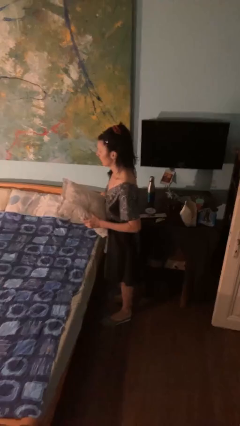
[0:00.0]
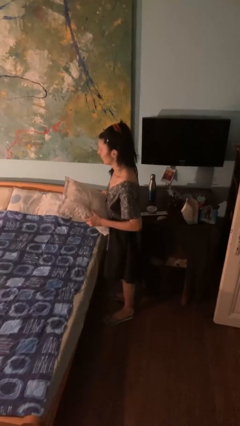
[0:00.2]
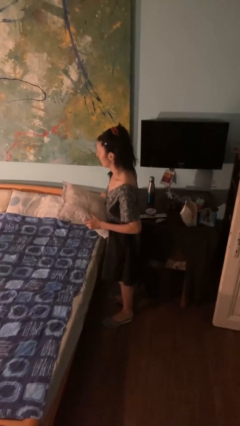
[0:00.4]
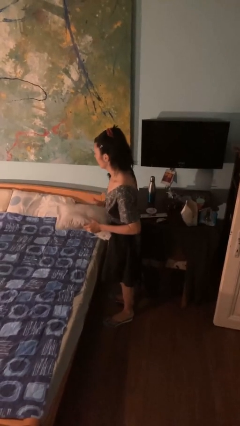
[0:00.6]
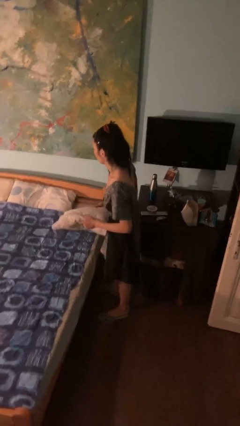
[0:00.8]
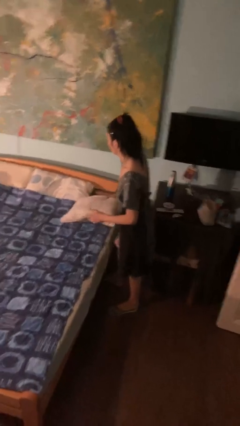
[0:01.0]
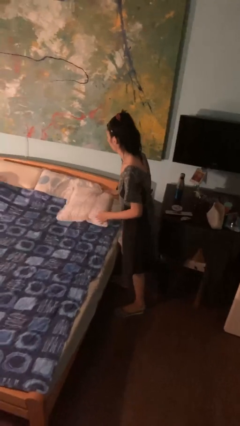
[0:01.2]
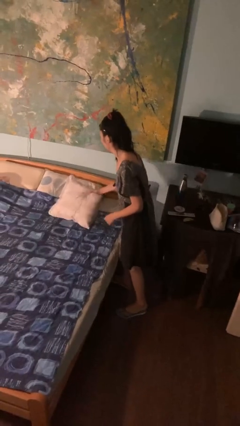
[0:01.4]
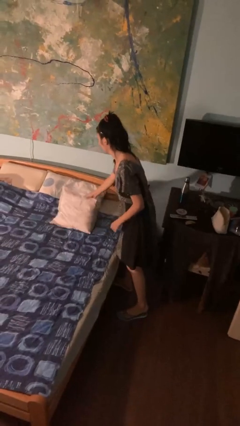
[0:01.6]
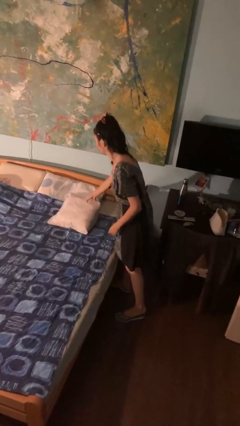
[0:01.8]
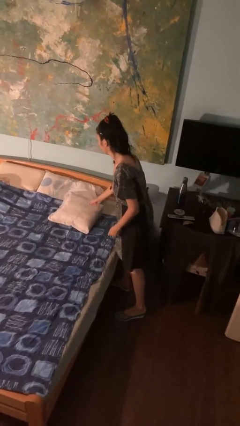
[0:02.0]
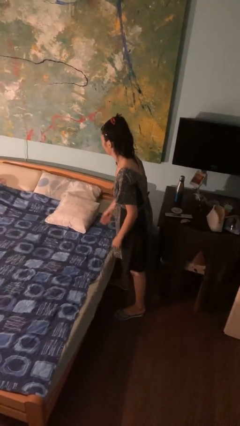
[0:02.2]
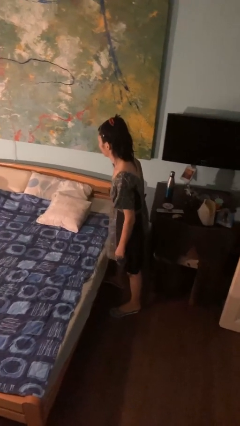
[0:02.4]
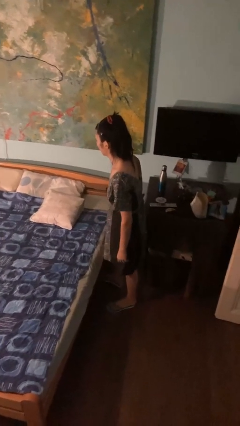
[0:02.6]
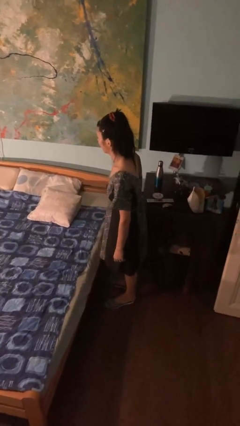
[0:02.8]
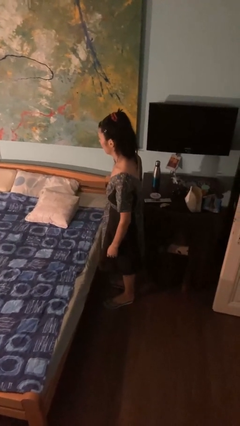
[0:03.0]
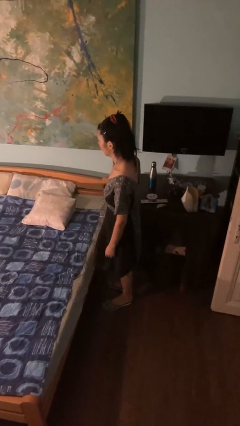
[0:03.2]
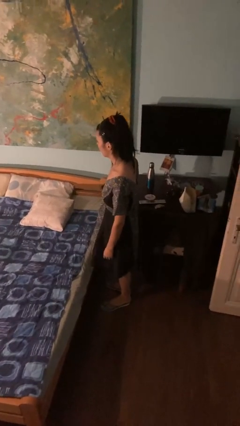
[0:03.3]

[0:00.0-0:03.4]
person puts down object on bed

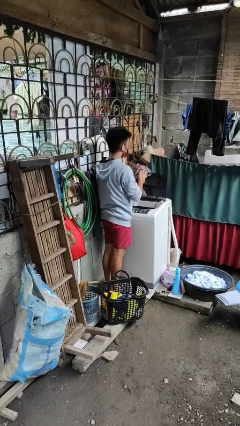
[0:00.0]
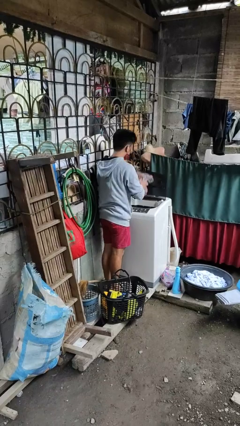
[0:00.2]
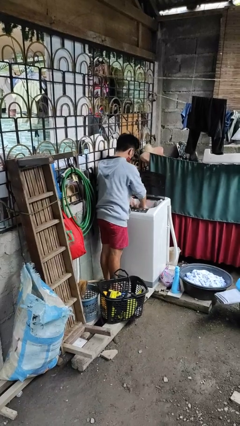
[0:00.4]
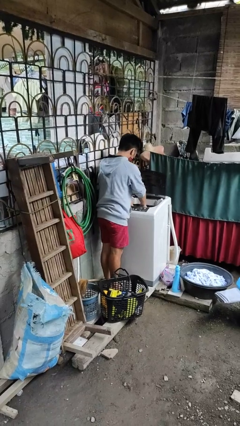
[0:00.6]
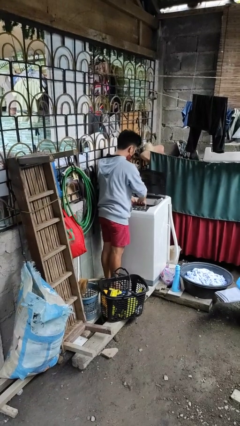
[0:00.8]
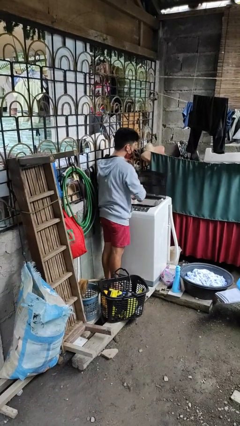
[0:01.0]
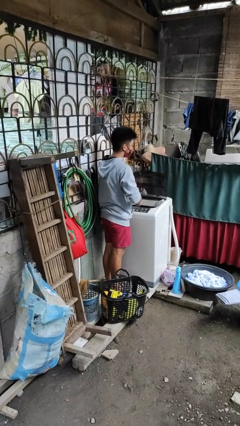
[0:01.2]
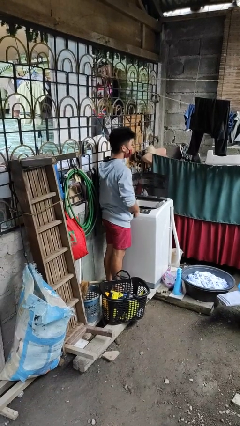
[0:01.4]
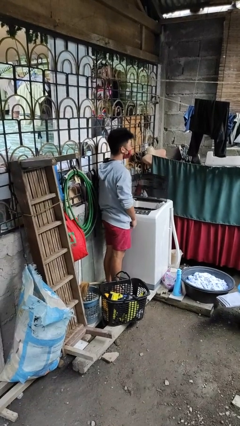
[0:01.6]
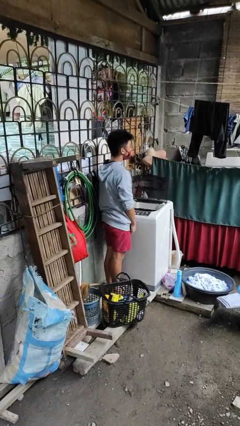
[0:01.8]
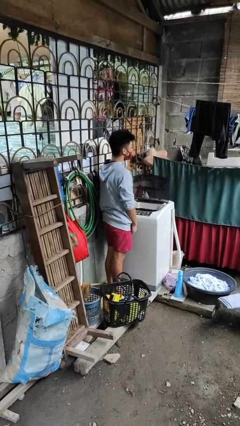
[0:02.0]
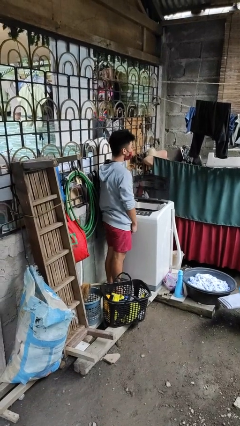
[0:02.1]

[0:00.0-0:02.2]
person loads dryer

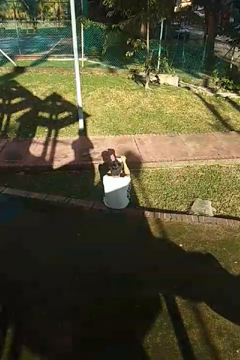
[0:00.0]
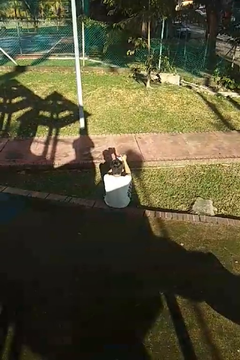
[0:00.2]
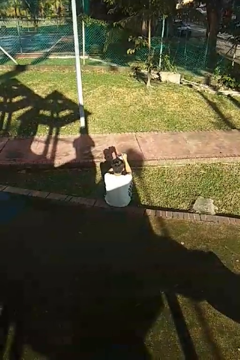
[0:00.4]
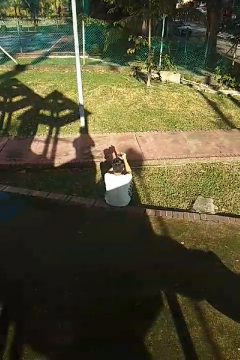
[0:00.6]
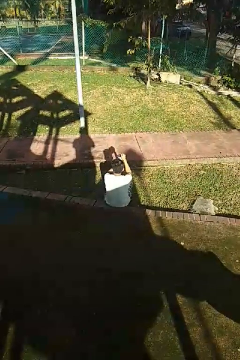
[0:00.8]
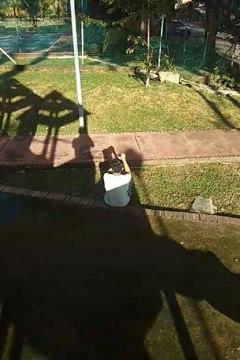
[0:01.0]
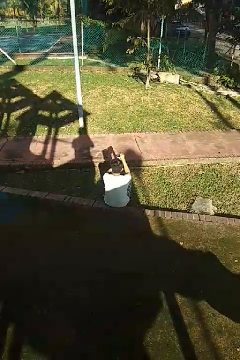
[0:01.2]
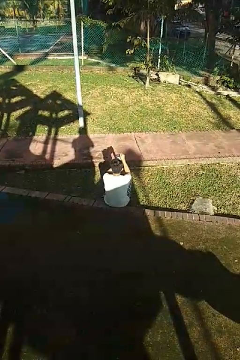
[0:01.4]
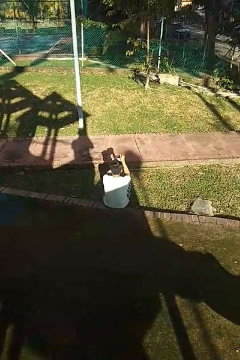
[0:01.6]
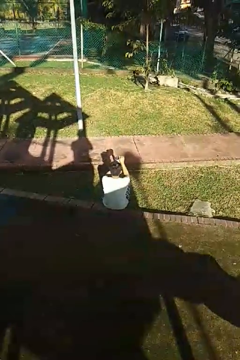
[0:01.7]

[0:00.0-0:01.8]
person stirs mug

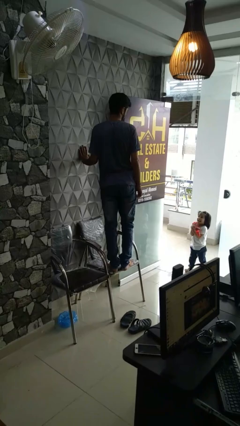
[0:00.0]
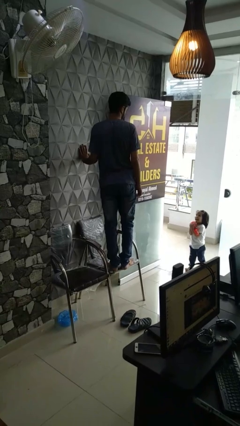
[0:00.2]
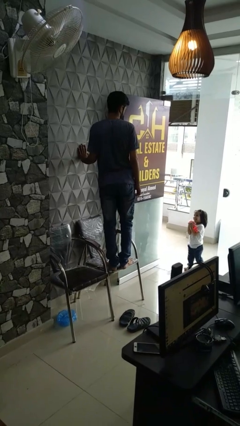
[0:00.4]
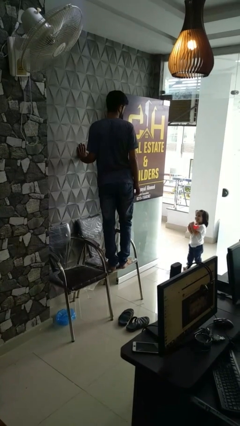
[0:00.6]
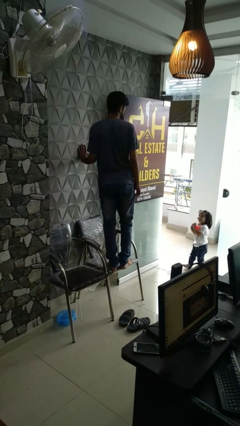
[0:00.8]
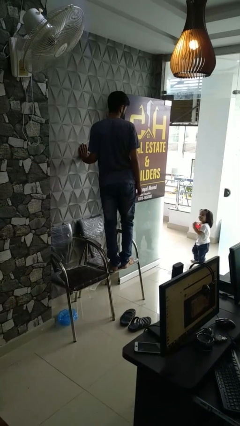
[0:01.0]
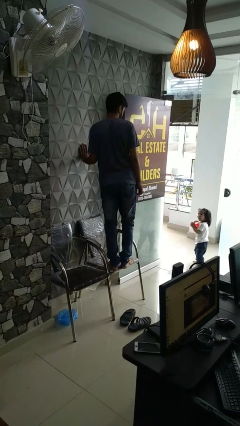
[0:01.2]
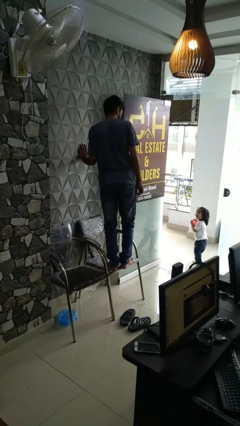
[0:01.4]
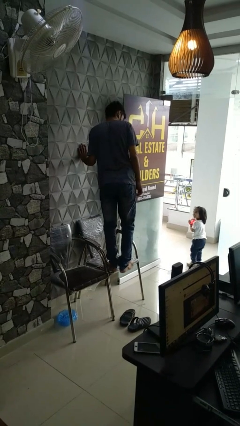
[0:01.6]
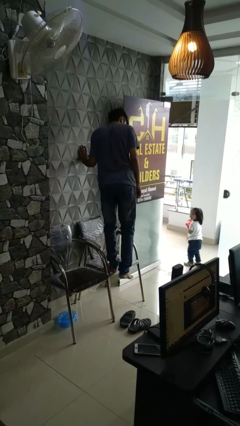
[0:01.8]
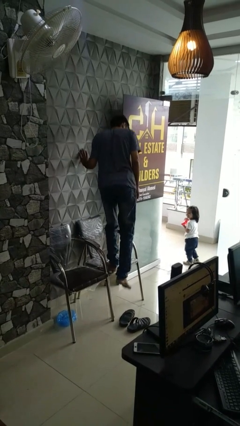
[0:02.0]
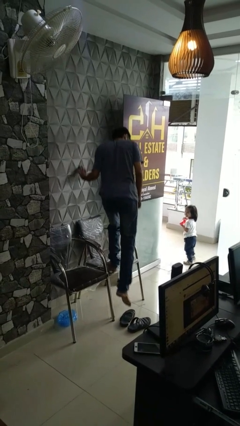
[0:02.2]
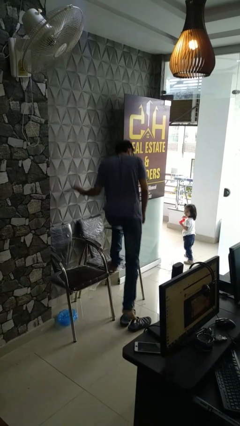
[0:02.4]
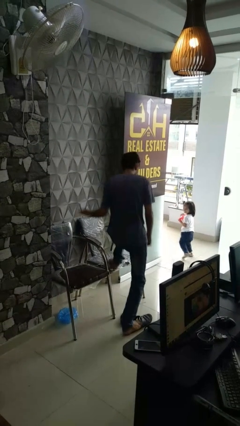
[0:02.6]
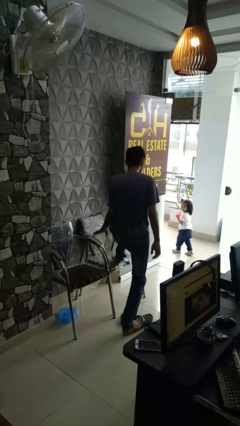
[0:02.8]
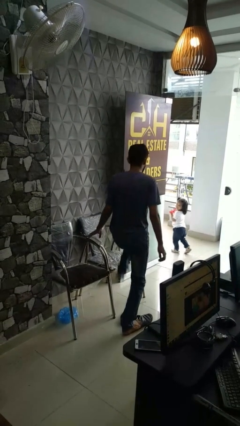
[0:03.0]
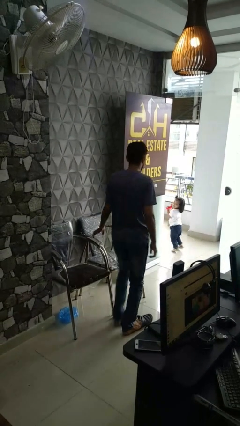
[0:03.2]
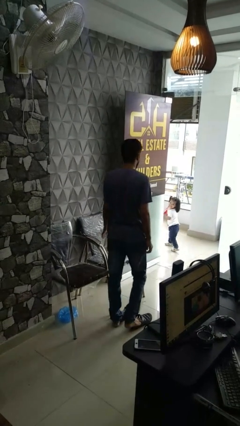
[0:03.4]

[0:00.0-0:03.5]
person climbs off chair

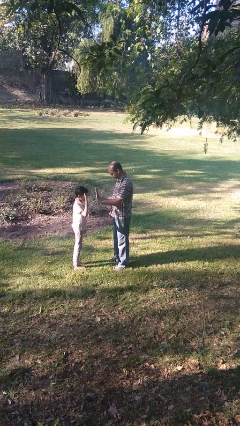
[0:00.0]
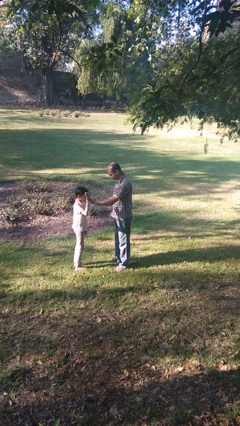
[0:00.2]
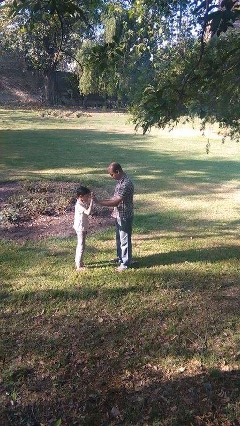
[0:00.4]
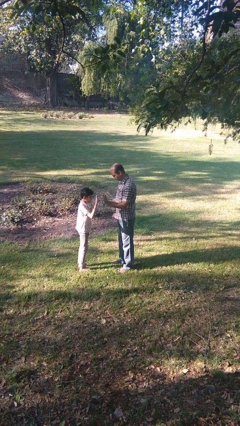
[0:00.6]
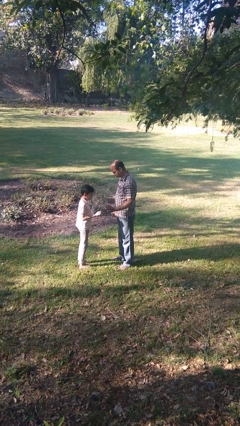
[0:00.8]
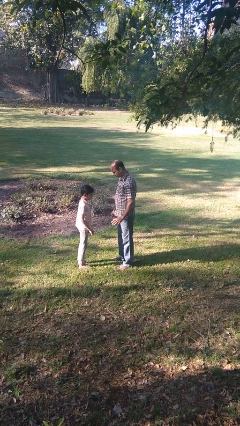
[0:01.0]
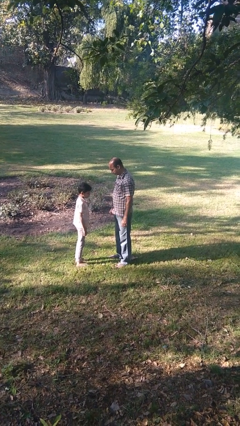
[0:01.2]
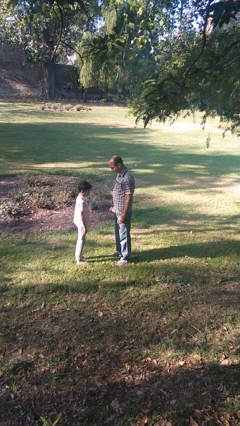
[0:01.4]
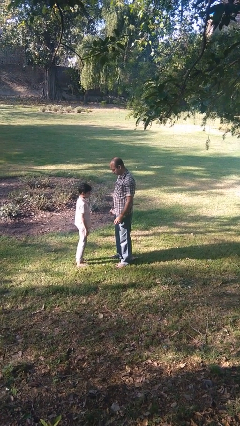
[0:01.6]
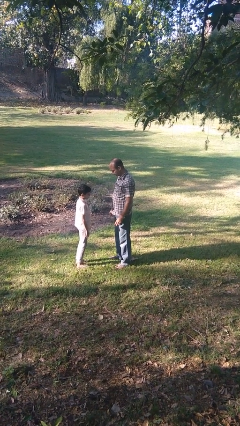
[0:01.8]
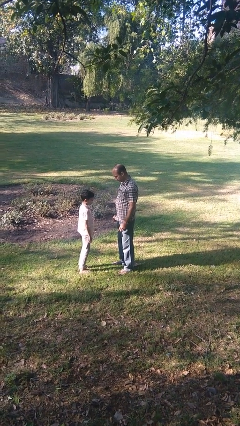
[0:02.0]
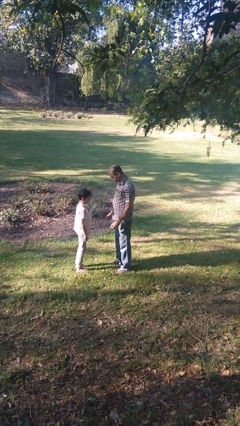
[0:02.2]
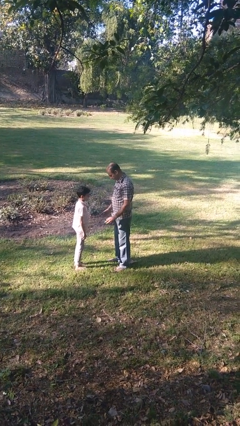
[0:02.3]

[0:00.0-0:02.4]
person highfives hand

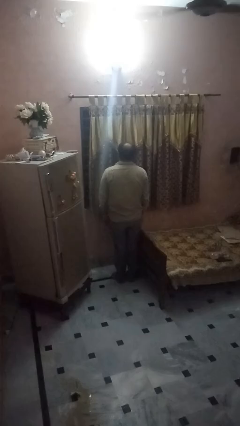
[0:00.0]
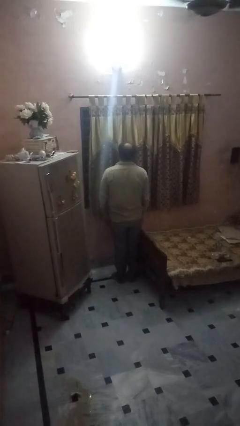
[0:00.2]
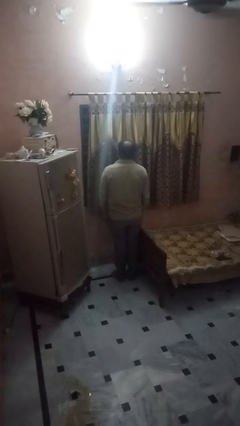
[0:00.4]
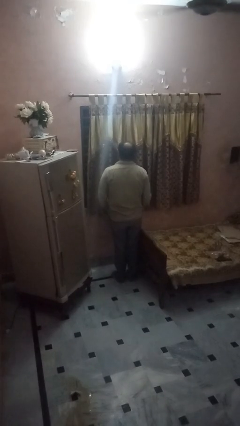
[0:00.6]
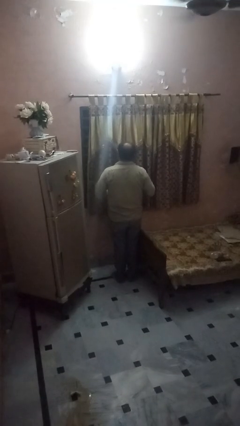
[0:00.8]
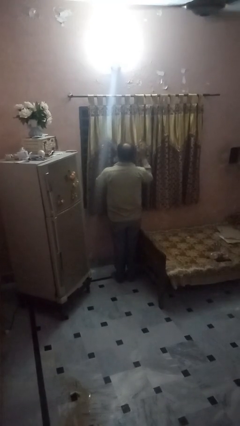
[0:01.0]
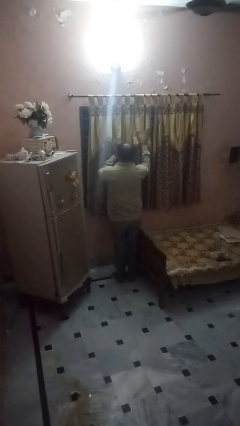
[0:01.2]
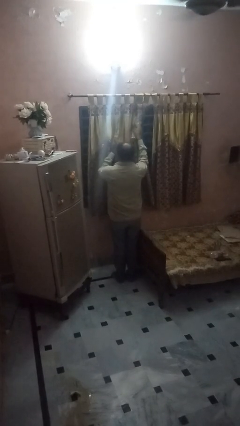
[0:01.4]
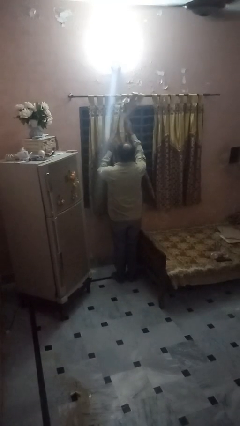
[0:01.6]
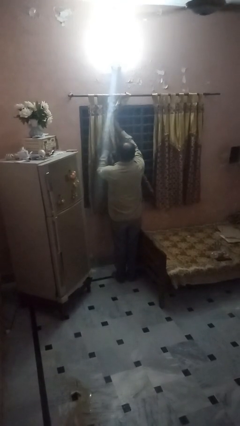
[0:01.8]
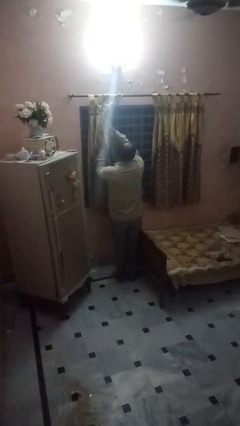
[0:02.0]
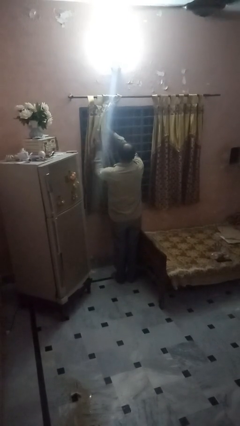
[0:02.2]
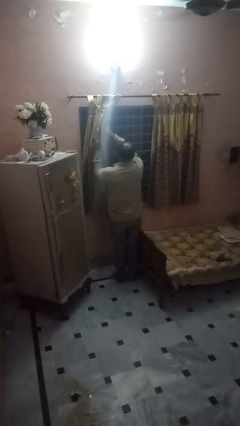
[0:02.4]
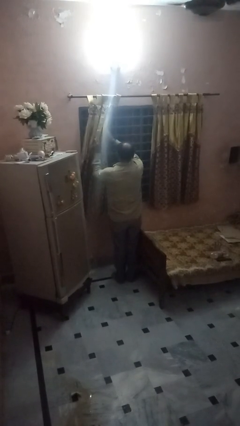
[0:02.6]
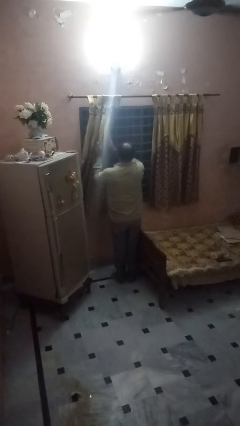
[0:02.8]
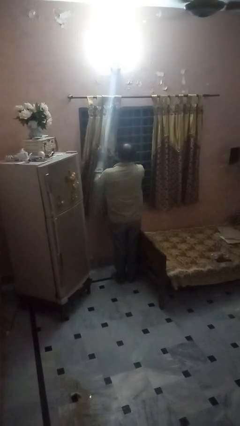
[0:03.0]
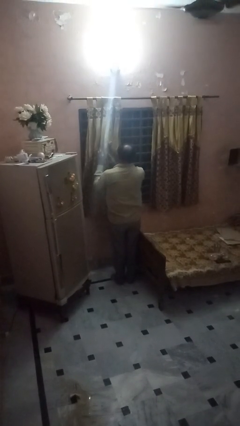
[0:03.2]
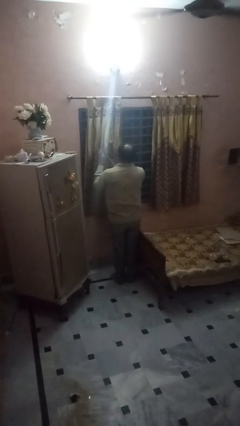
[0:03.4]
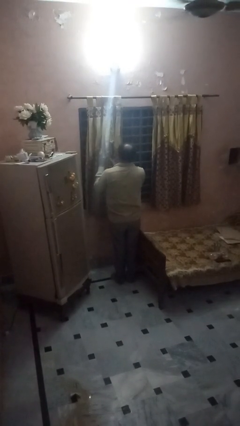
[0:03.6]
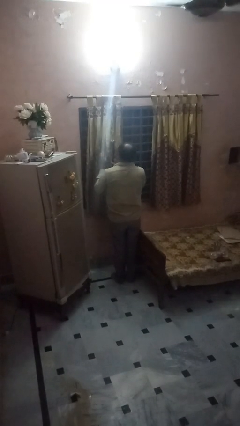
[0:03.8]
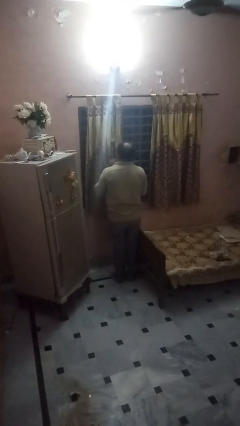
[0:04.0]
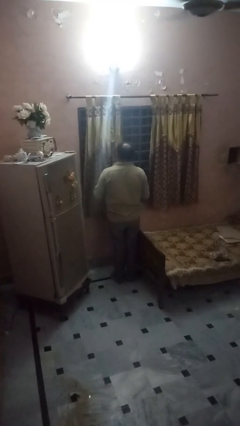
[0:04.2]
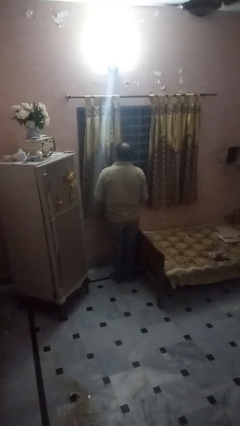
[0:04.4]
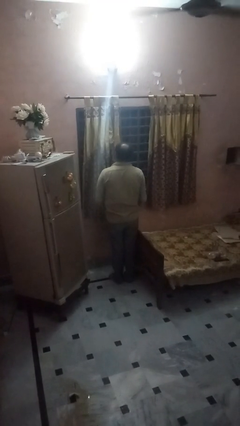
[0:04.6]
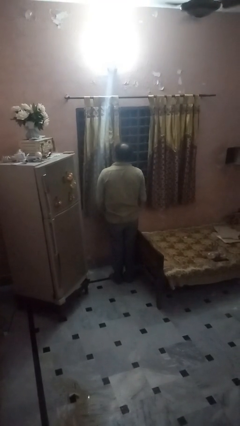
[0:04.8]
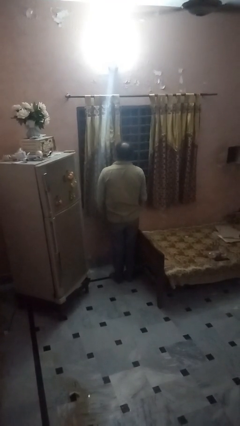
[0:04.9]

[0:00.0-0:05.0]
person opens curtains
